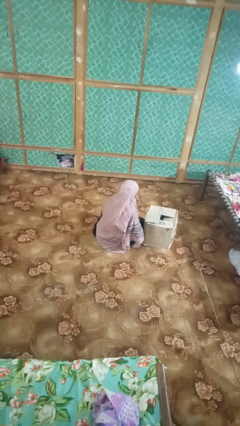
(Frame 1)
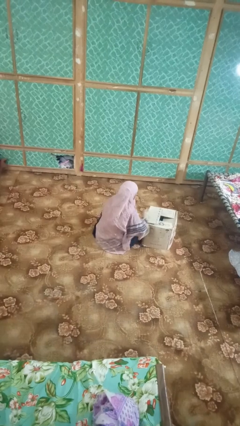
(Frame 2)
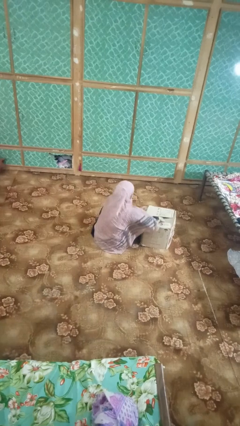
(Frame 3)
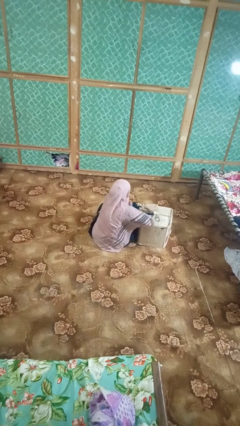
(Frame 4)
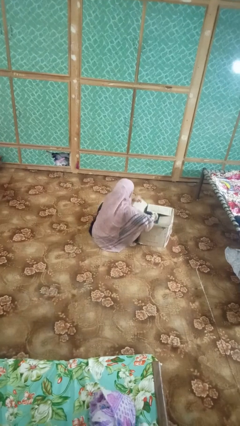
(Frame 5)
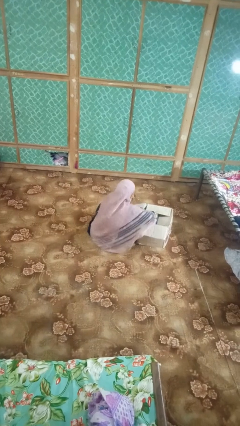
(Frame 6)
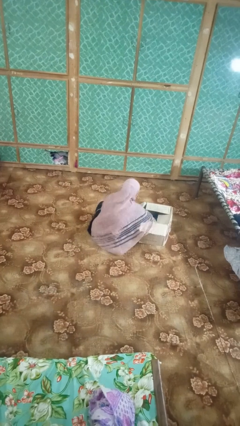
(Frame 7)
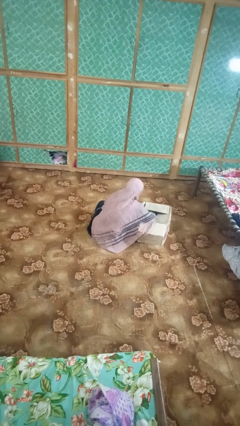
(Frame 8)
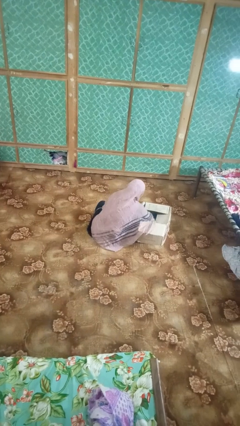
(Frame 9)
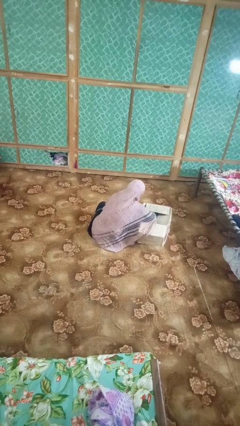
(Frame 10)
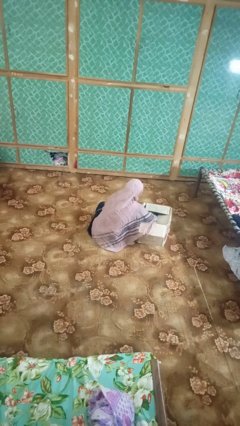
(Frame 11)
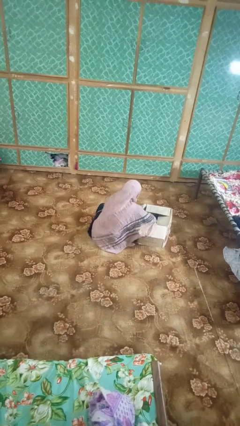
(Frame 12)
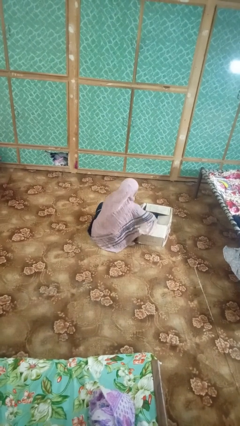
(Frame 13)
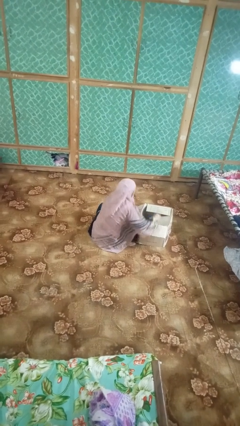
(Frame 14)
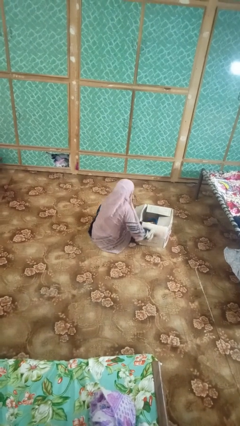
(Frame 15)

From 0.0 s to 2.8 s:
person searches in box

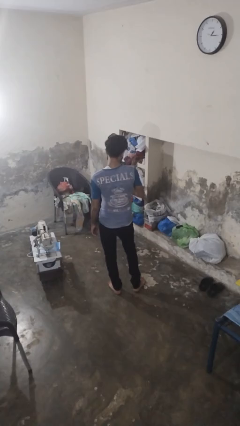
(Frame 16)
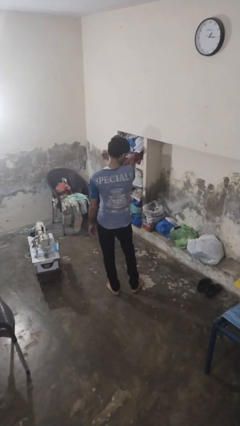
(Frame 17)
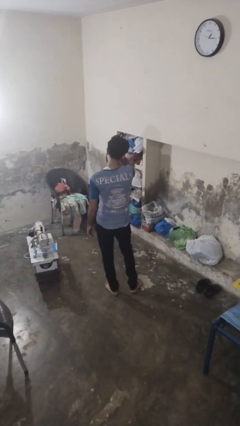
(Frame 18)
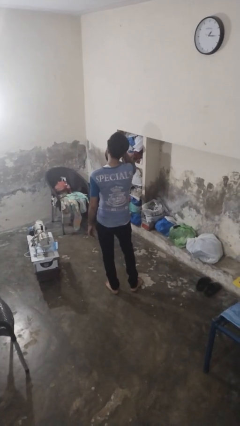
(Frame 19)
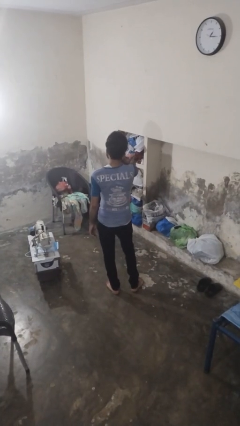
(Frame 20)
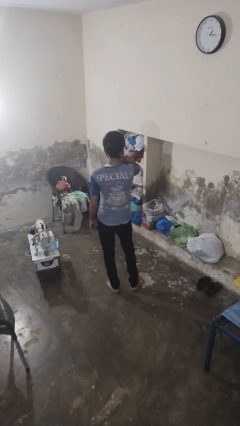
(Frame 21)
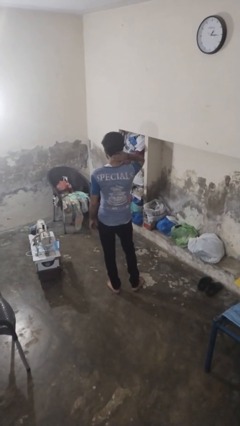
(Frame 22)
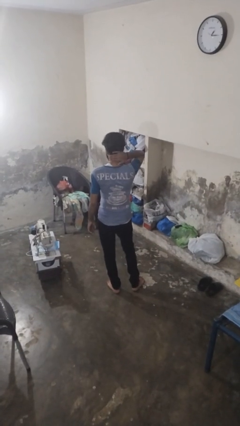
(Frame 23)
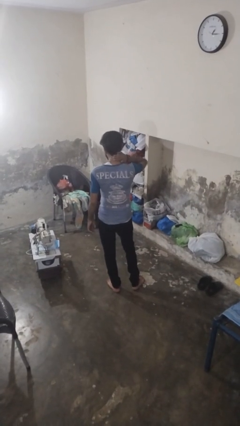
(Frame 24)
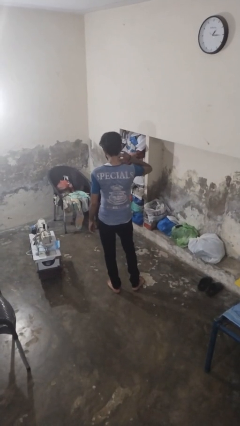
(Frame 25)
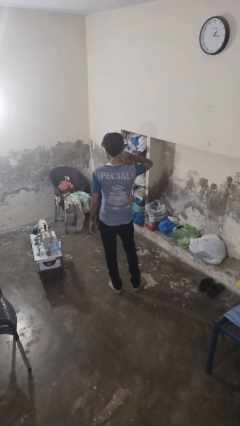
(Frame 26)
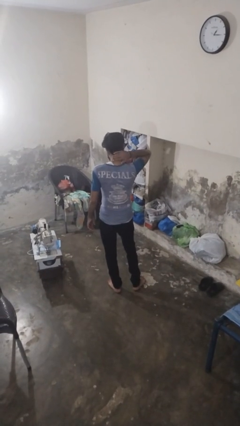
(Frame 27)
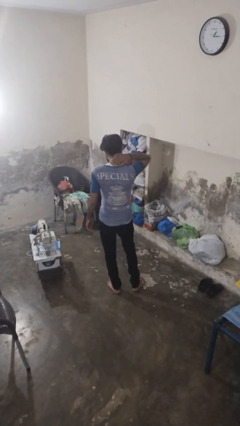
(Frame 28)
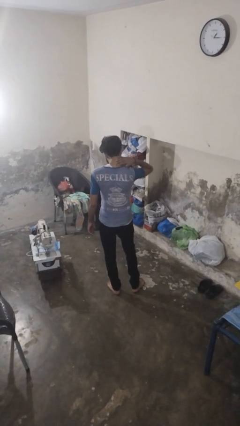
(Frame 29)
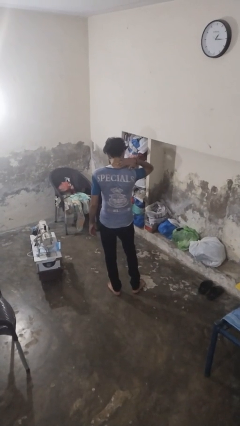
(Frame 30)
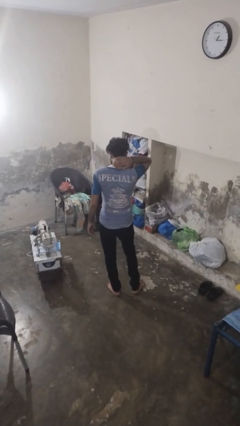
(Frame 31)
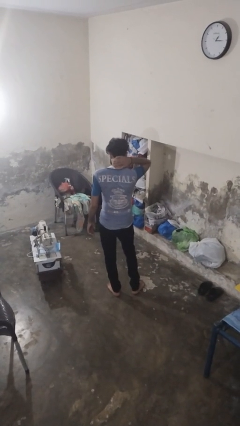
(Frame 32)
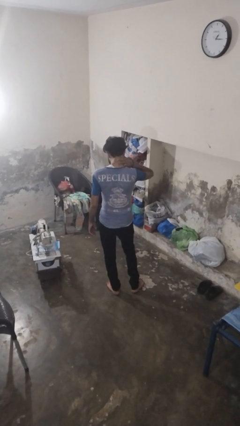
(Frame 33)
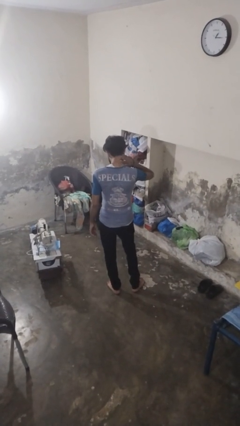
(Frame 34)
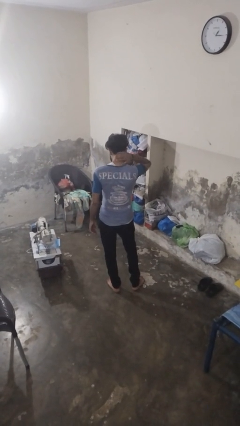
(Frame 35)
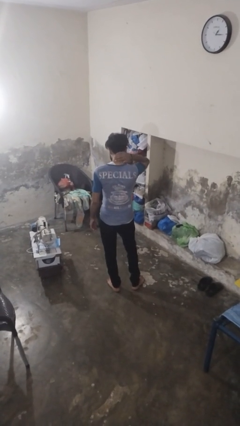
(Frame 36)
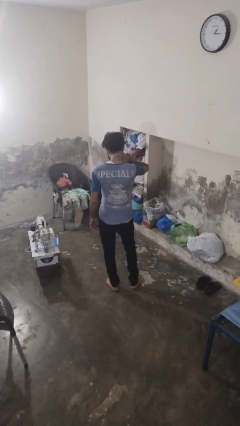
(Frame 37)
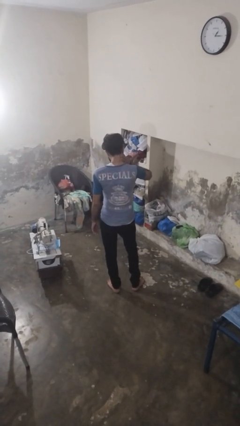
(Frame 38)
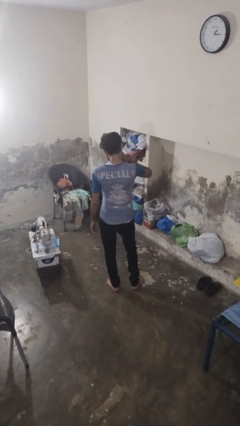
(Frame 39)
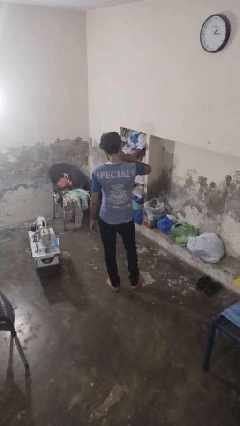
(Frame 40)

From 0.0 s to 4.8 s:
person rubs neck

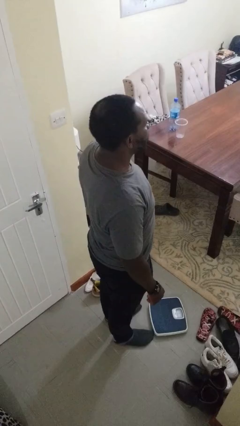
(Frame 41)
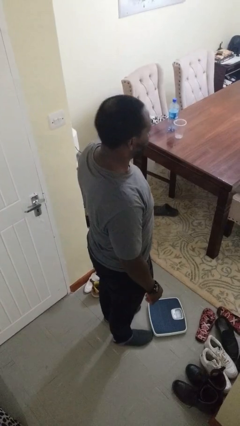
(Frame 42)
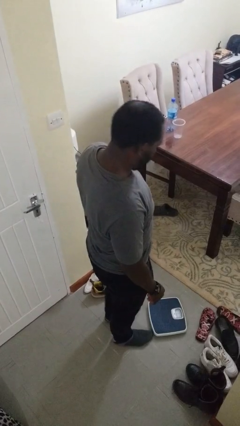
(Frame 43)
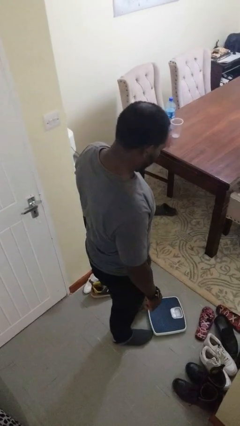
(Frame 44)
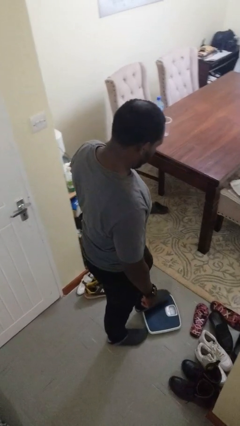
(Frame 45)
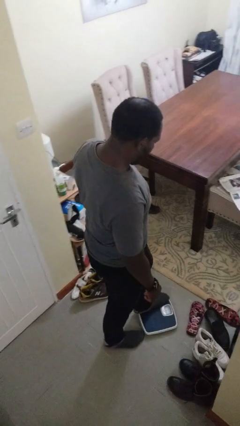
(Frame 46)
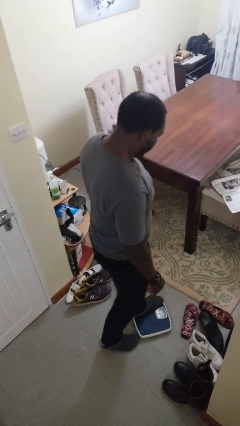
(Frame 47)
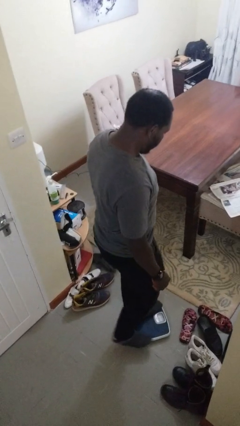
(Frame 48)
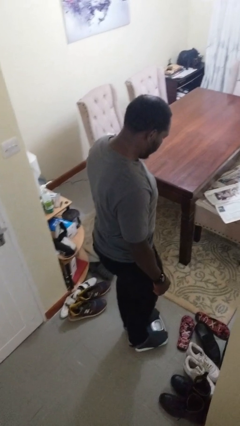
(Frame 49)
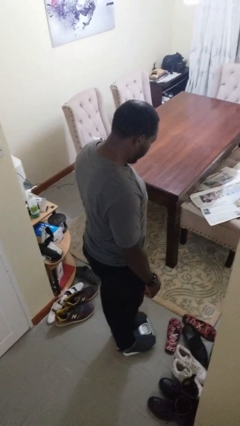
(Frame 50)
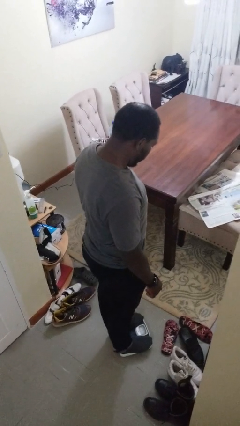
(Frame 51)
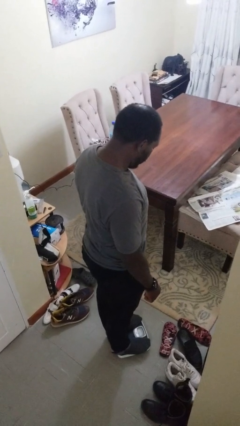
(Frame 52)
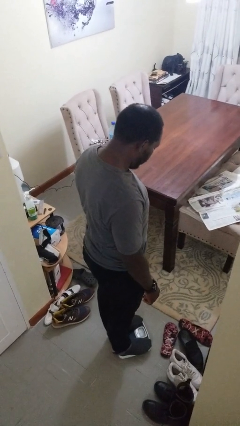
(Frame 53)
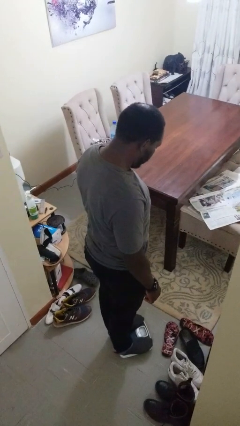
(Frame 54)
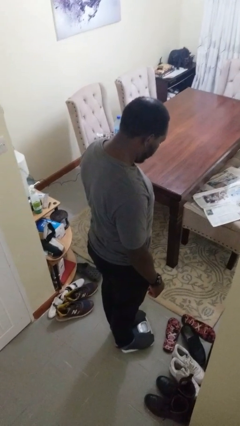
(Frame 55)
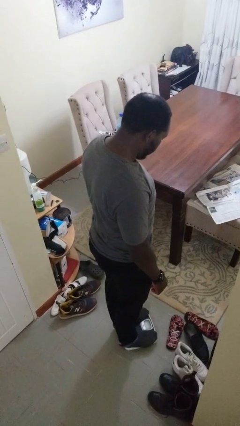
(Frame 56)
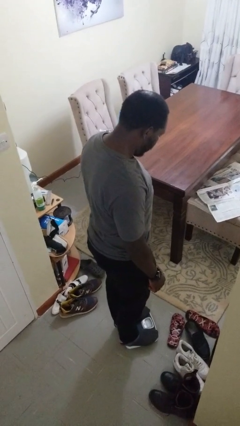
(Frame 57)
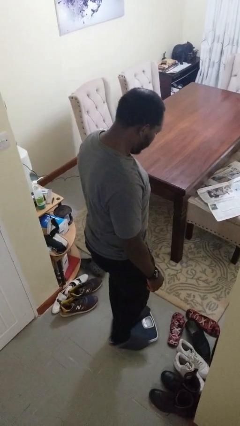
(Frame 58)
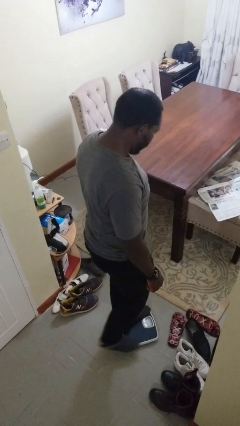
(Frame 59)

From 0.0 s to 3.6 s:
person uses bodyweight scale

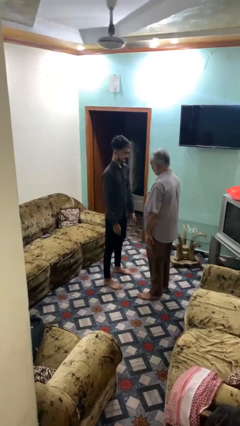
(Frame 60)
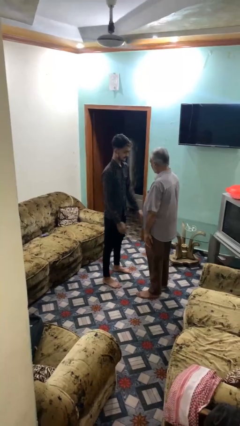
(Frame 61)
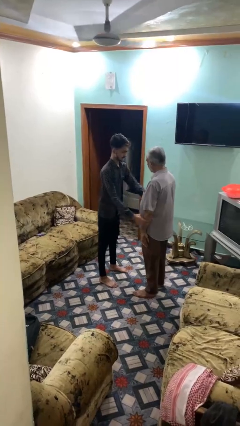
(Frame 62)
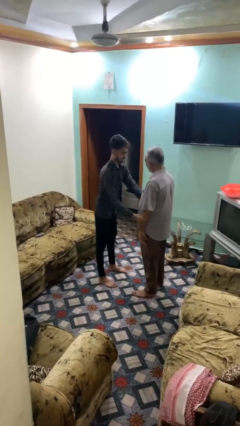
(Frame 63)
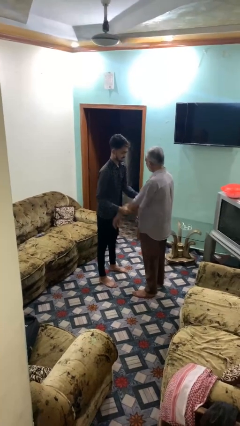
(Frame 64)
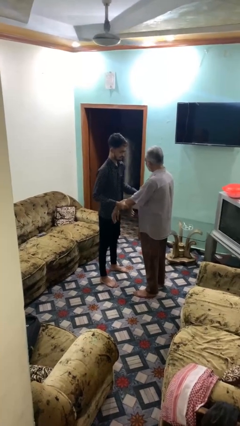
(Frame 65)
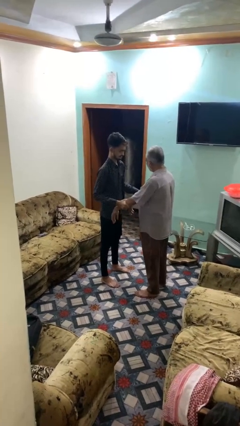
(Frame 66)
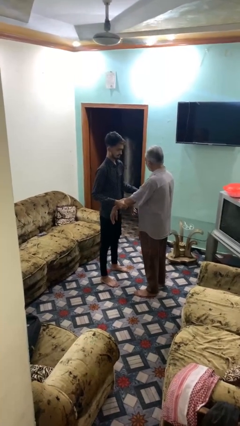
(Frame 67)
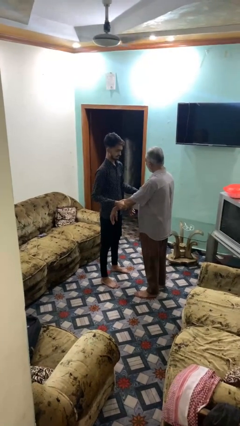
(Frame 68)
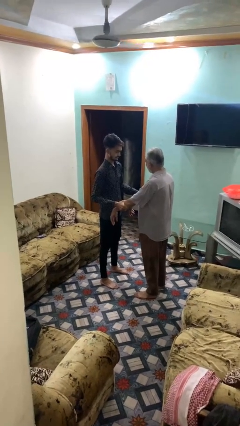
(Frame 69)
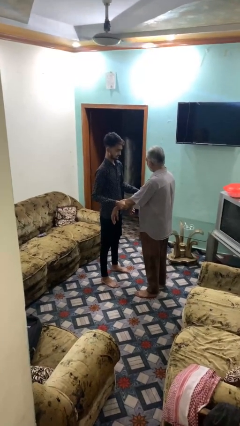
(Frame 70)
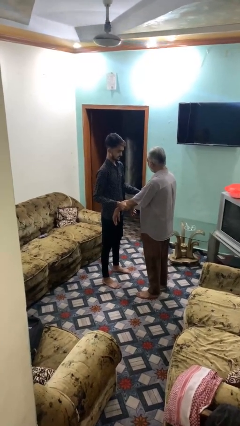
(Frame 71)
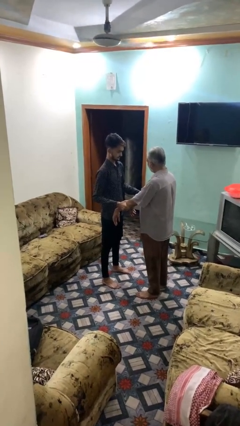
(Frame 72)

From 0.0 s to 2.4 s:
person grabs person by forearm

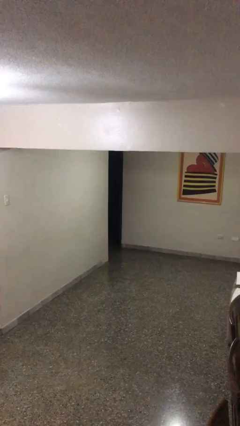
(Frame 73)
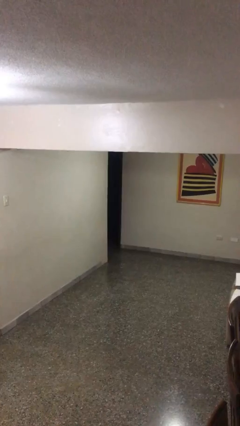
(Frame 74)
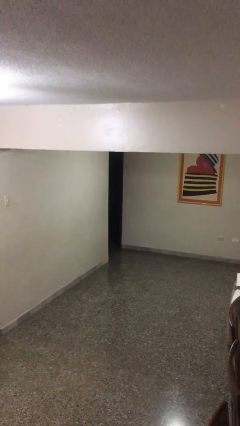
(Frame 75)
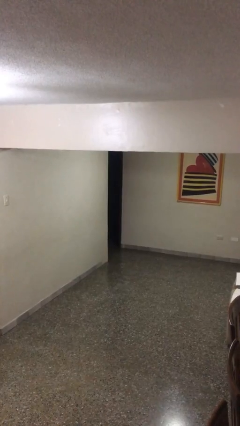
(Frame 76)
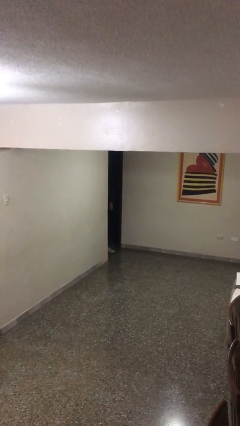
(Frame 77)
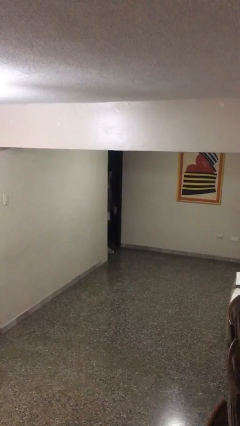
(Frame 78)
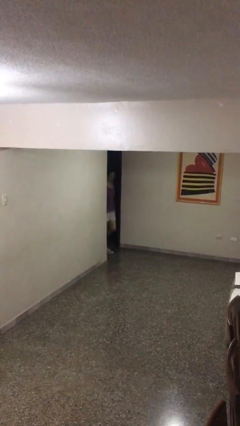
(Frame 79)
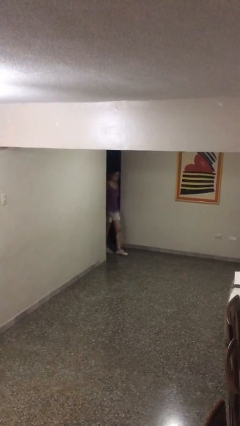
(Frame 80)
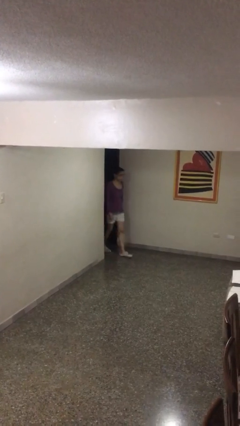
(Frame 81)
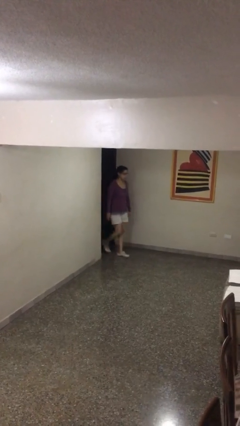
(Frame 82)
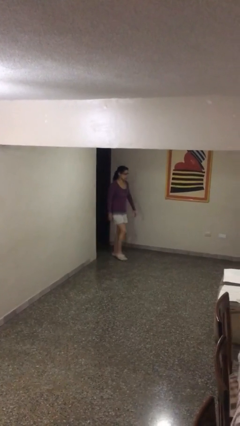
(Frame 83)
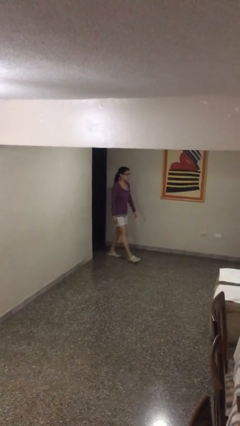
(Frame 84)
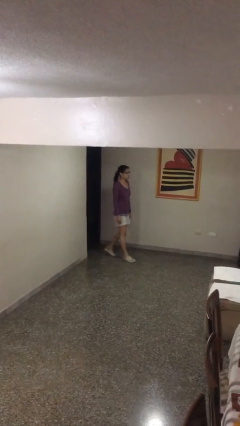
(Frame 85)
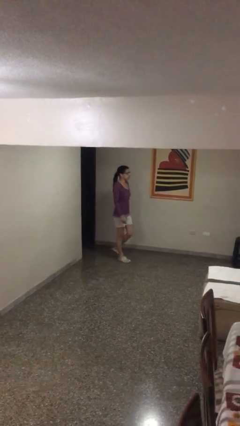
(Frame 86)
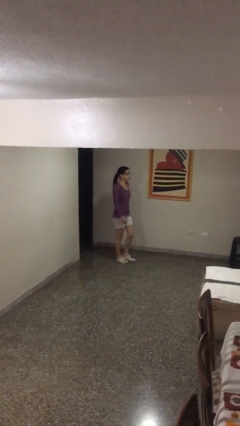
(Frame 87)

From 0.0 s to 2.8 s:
person enters scene through structure

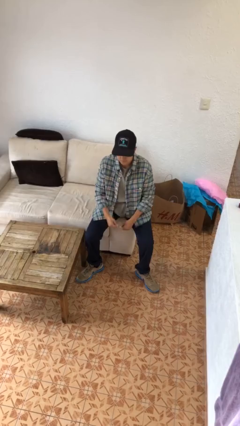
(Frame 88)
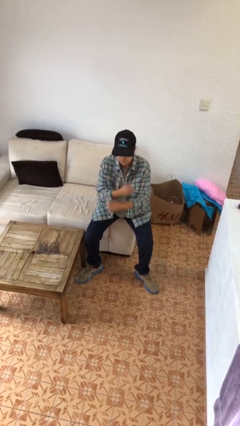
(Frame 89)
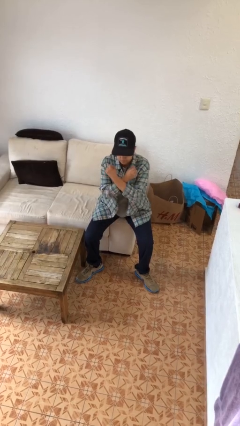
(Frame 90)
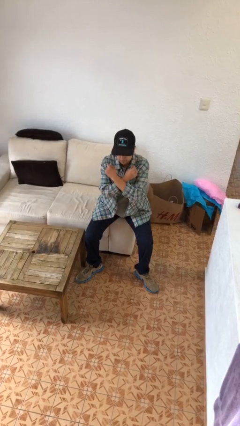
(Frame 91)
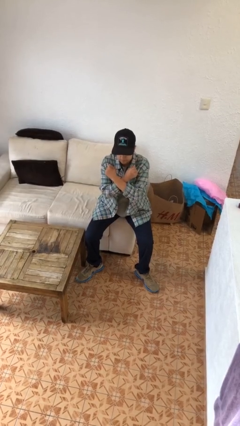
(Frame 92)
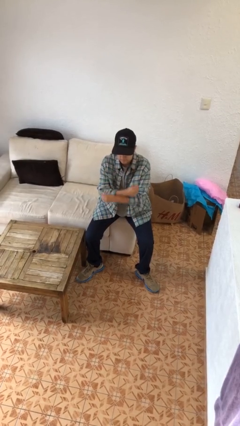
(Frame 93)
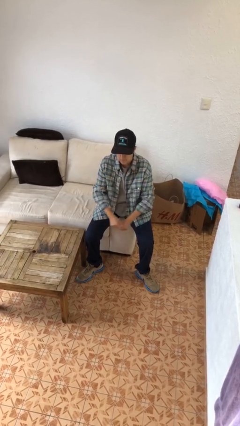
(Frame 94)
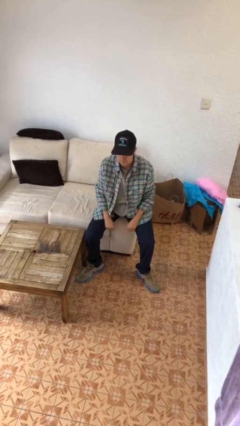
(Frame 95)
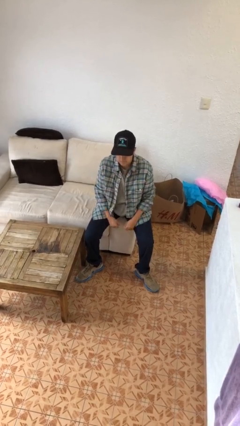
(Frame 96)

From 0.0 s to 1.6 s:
person gestures arms x
